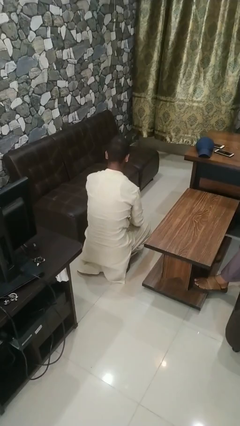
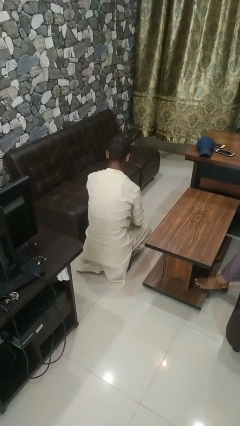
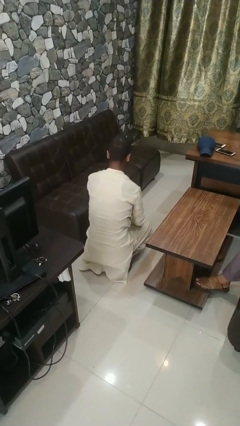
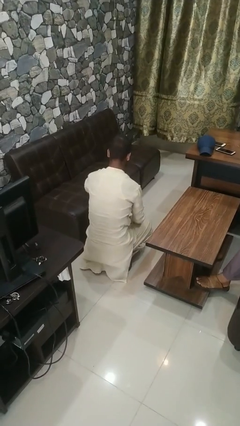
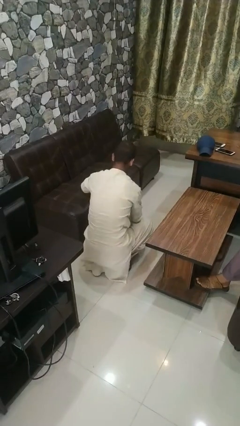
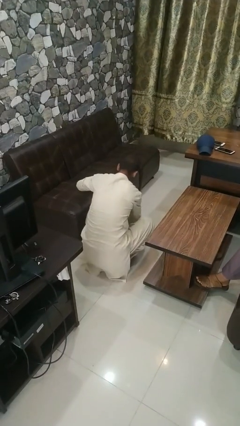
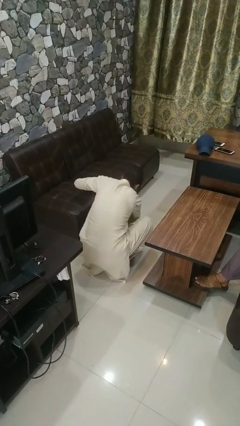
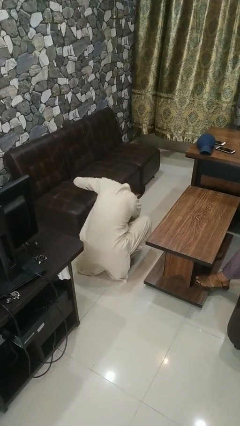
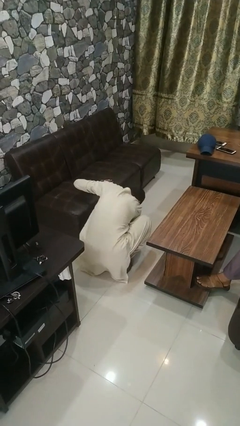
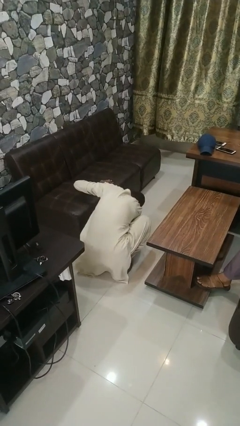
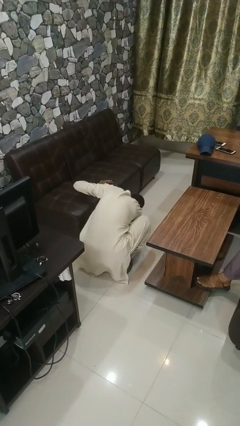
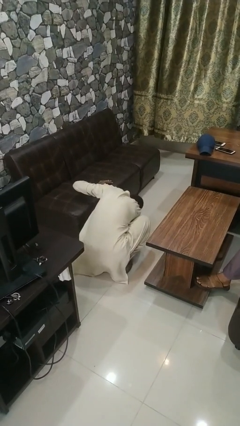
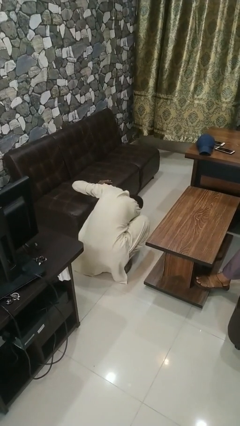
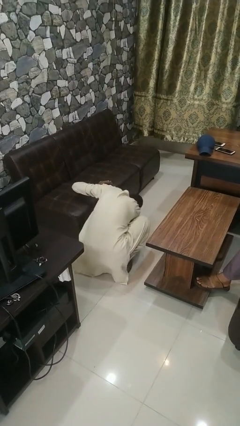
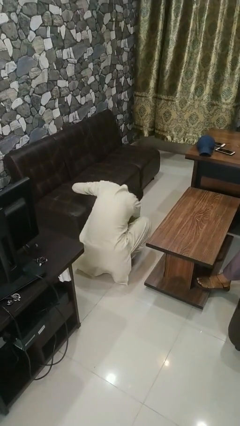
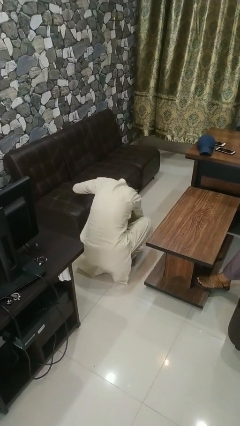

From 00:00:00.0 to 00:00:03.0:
person searches under couch

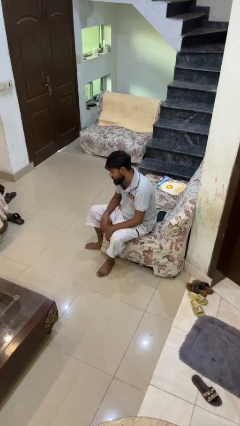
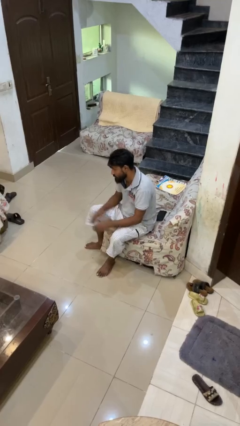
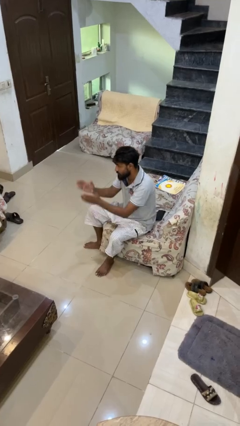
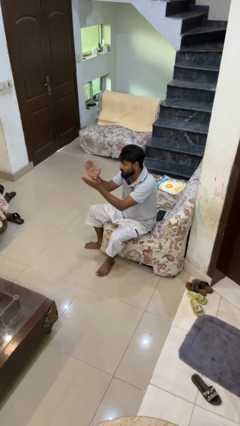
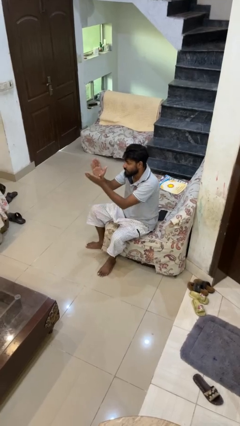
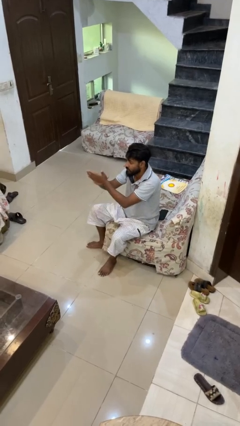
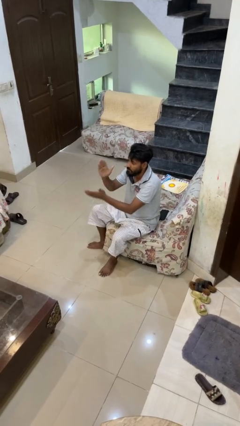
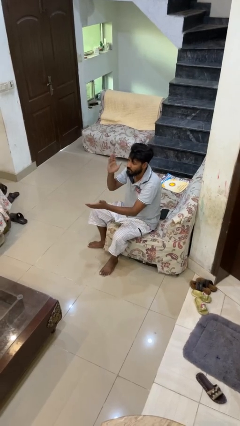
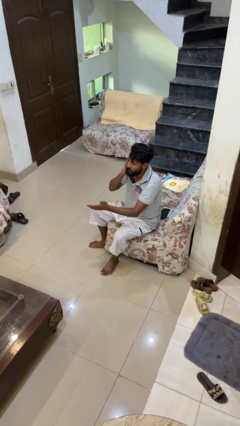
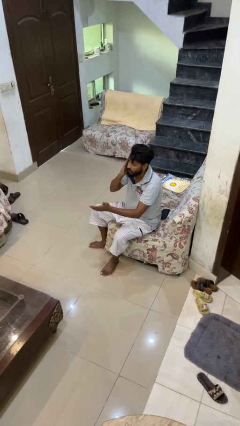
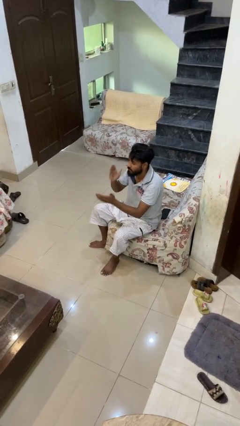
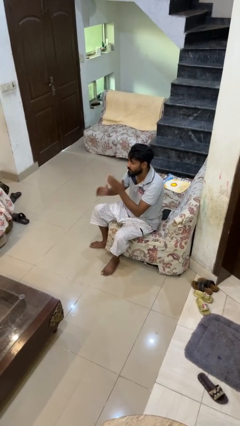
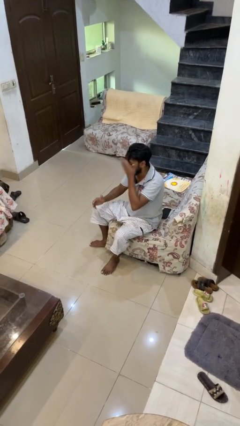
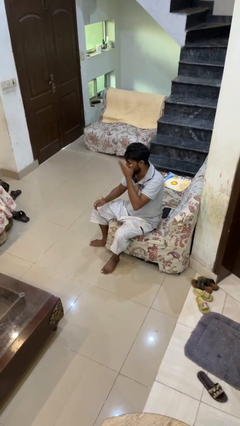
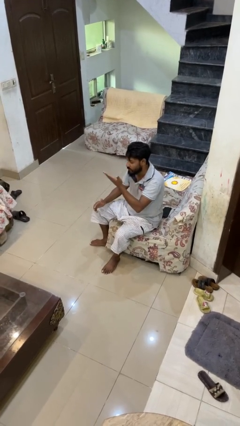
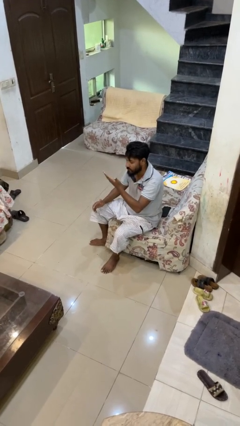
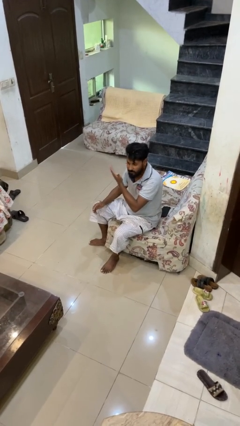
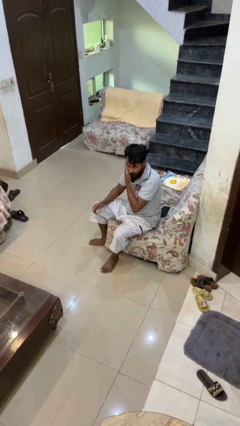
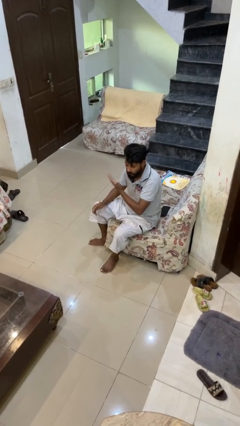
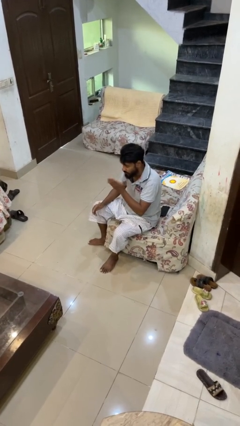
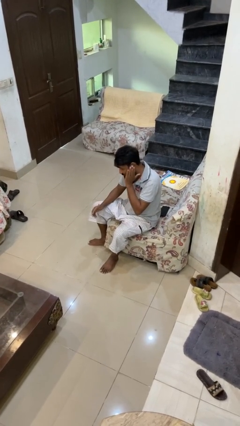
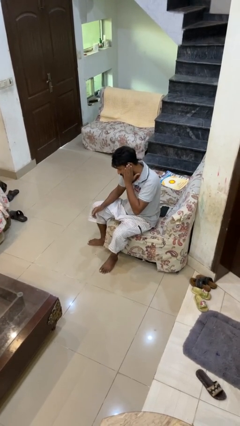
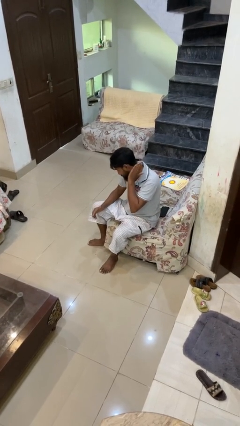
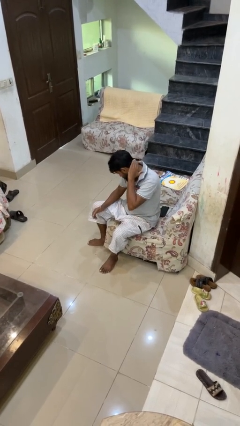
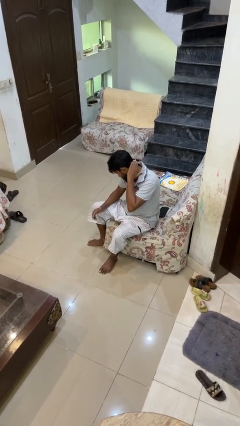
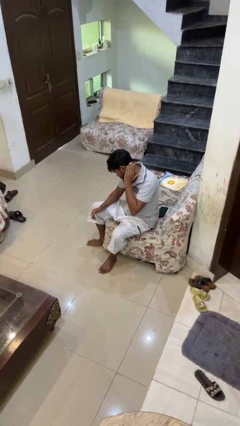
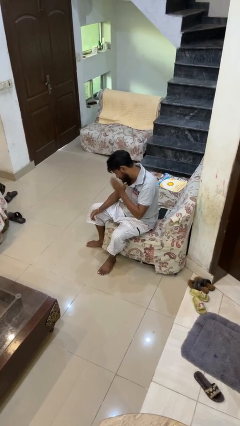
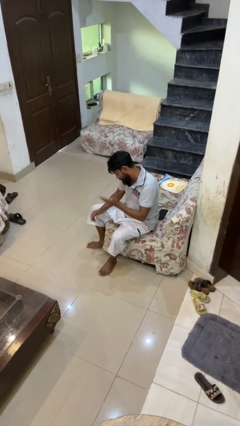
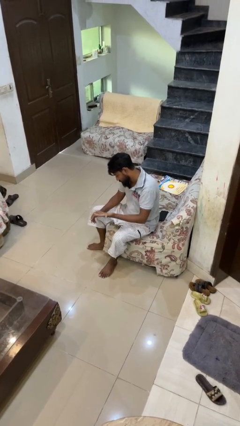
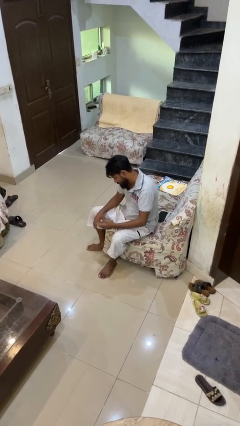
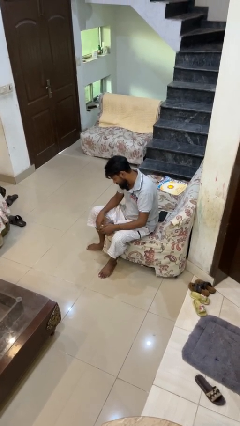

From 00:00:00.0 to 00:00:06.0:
person swats bug

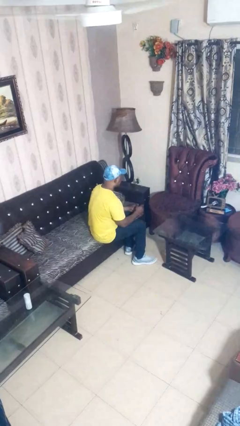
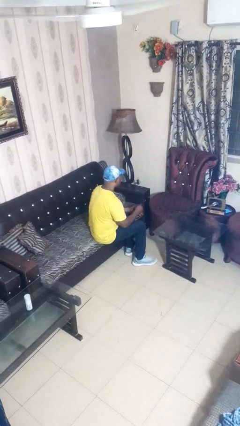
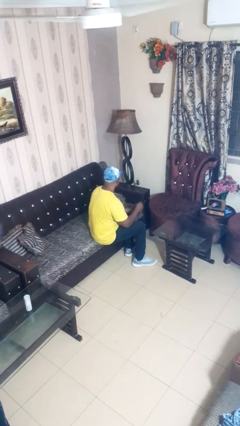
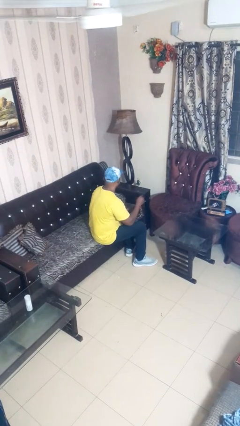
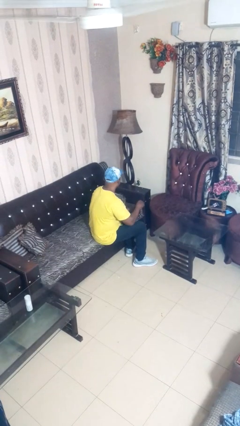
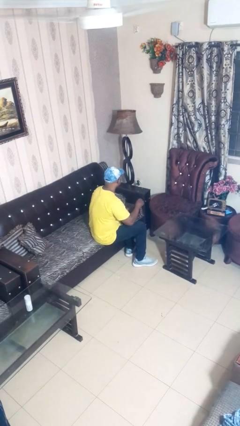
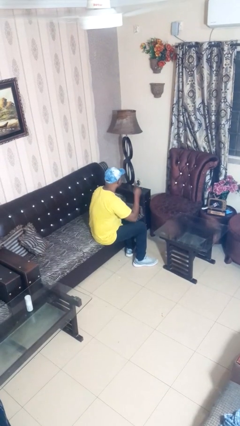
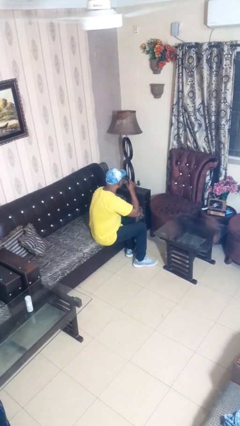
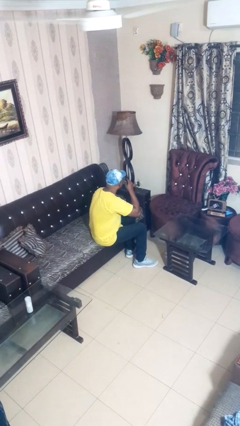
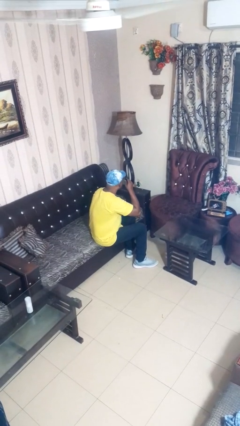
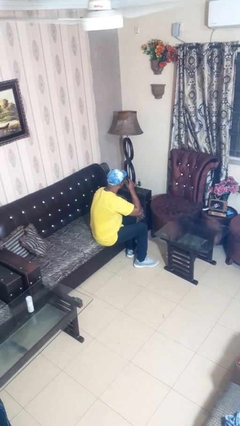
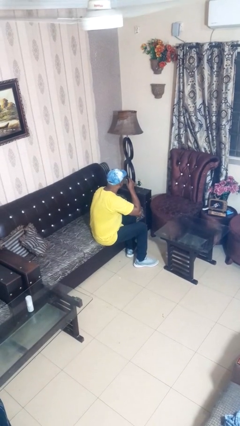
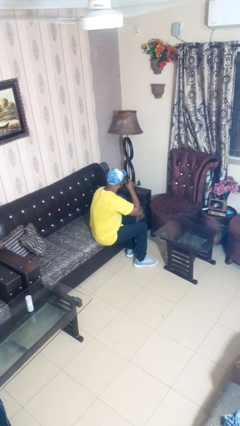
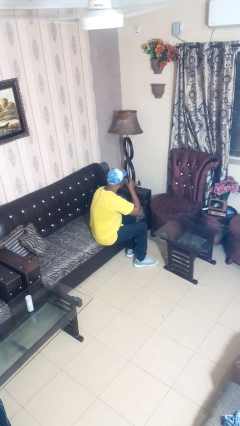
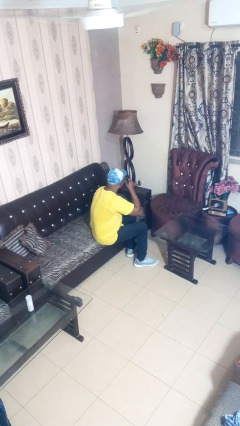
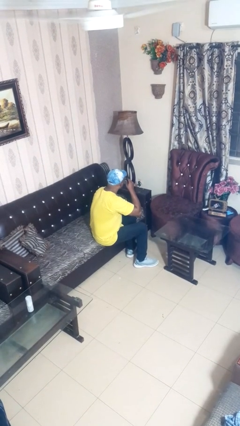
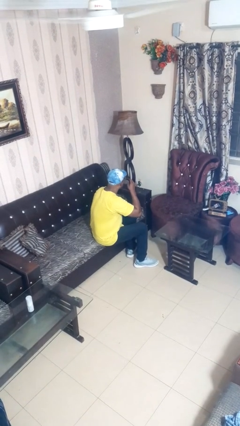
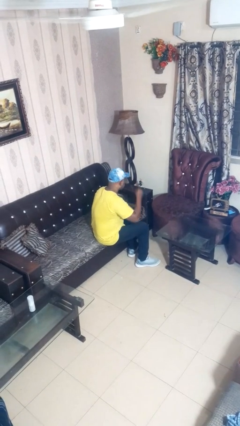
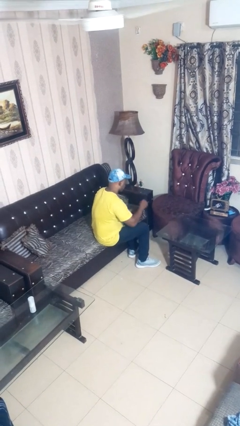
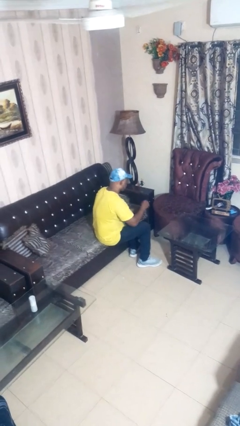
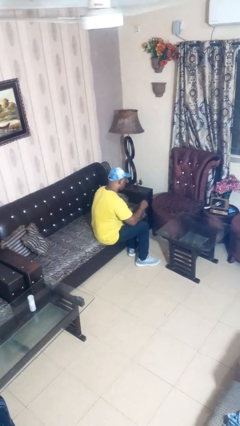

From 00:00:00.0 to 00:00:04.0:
person applies eye makeup

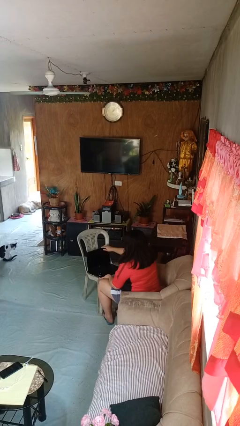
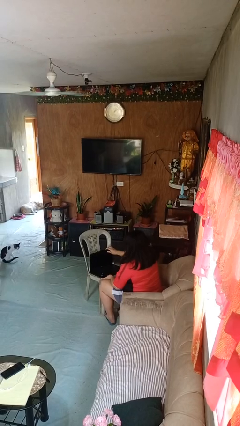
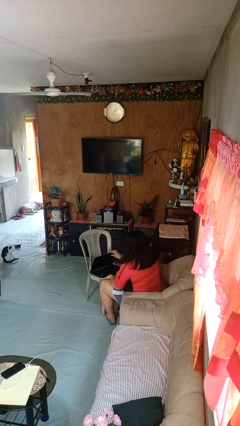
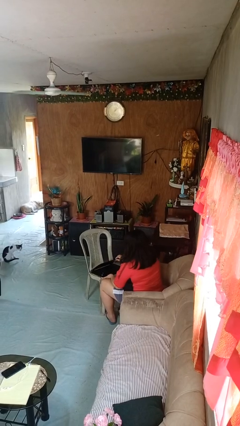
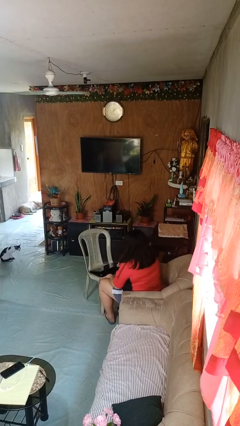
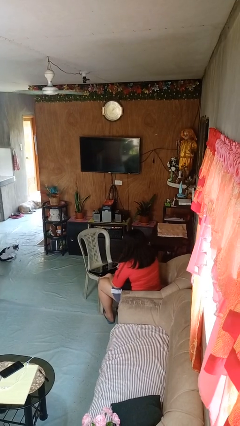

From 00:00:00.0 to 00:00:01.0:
person closes laptop

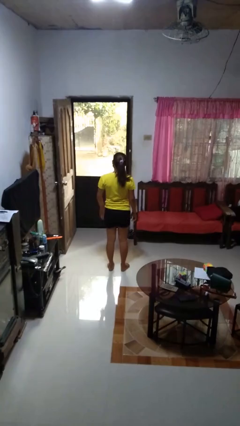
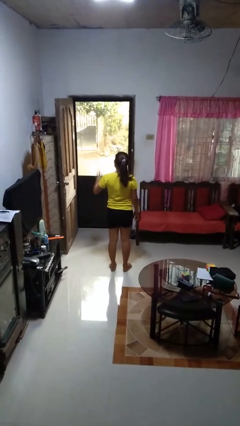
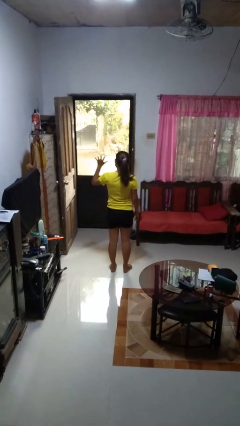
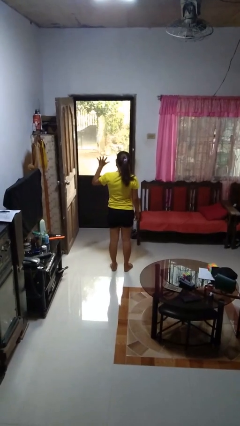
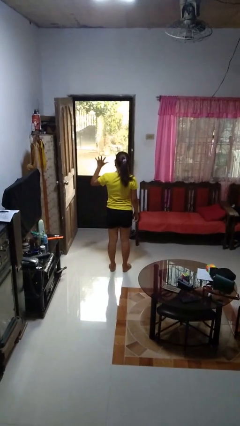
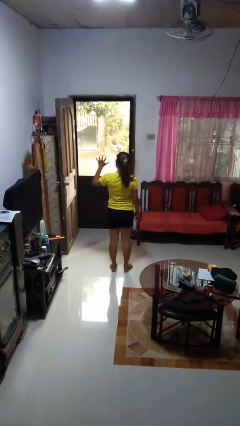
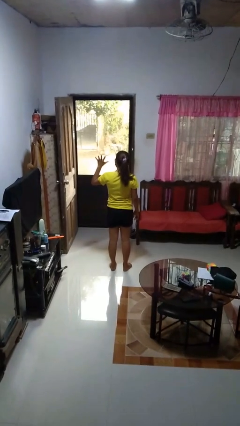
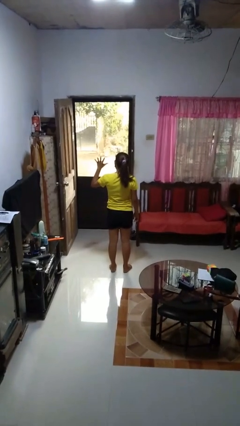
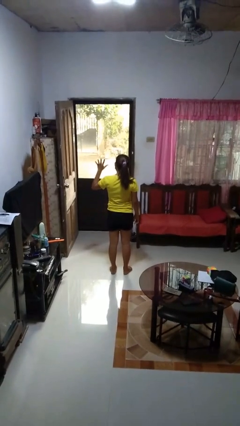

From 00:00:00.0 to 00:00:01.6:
person gestures number five

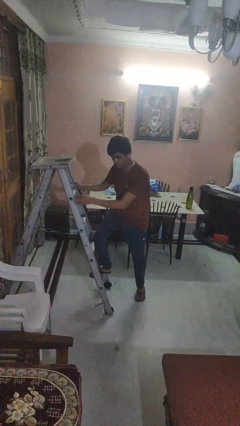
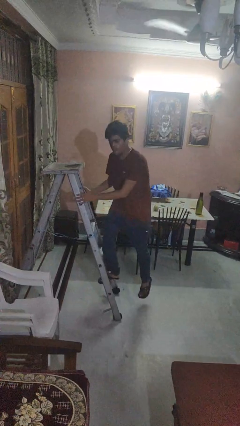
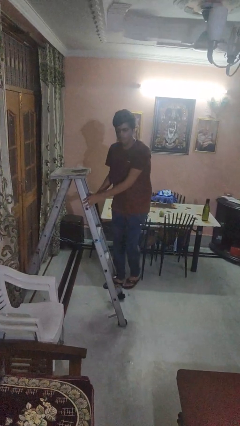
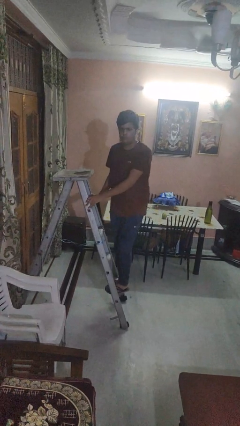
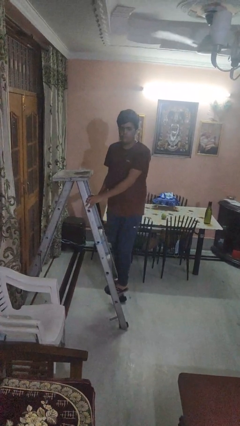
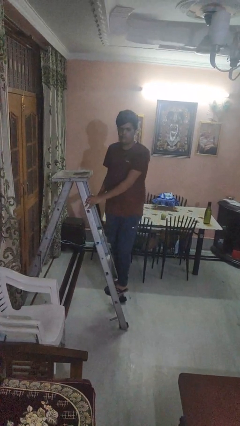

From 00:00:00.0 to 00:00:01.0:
person climbs up ladder

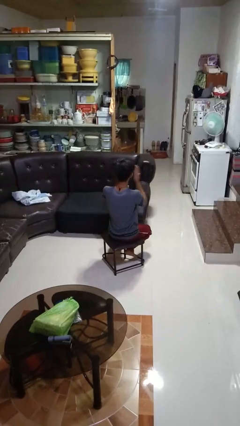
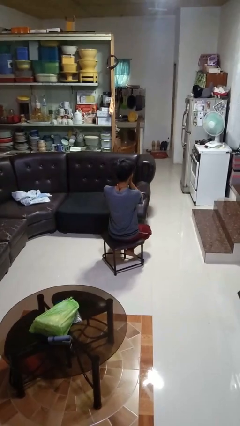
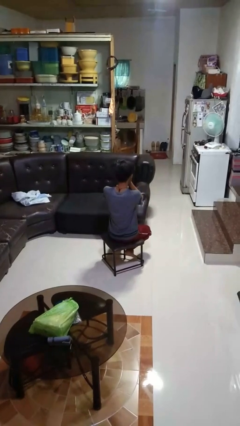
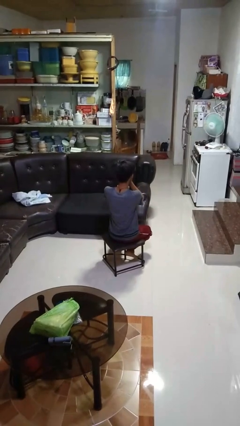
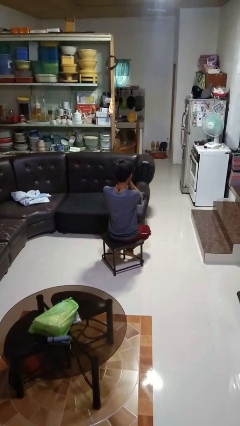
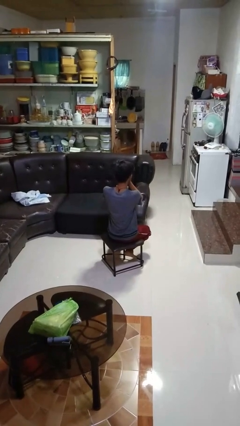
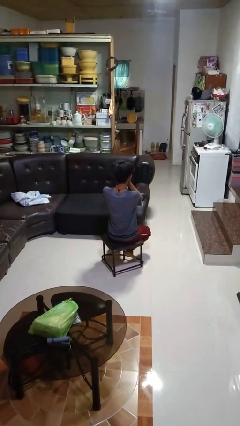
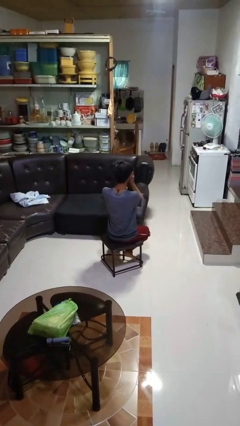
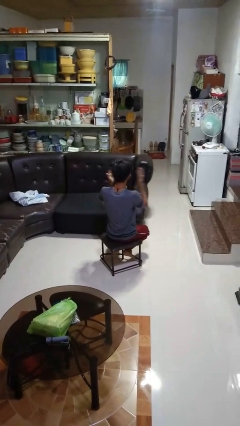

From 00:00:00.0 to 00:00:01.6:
person covers face with hands
